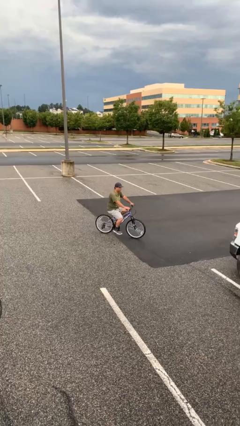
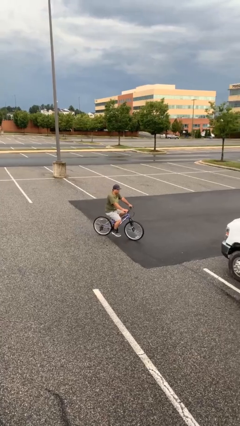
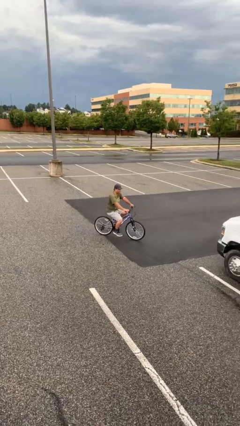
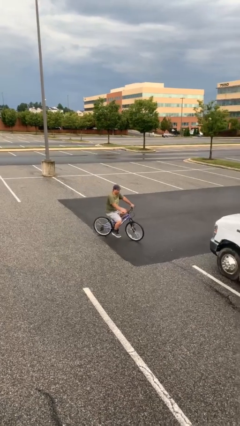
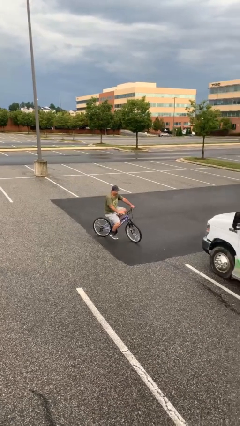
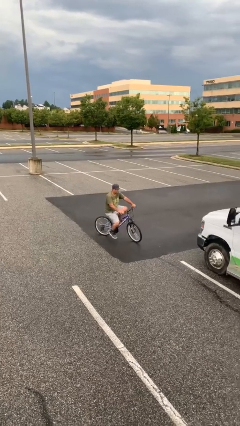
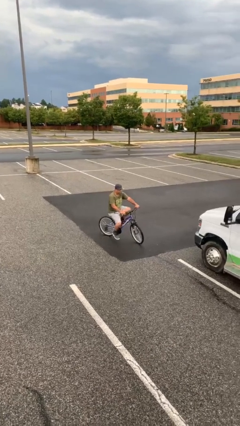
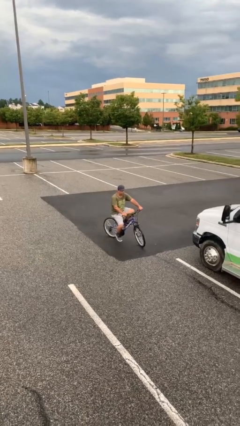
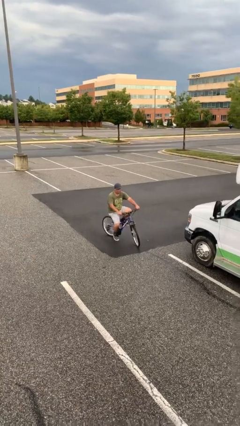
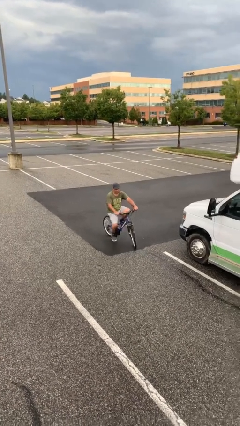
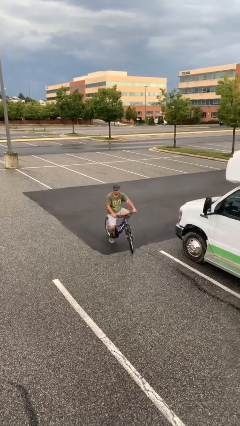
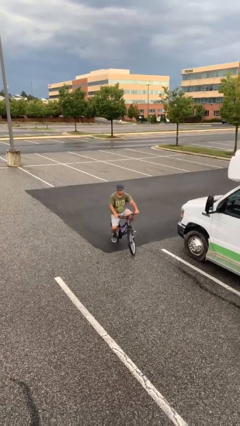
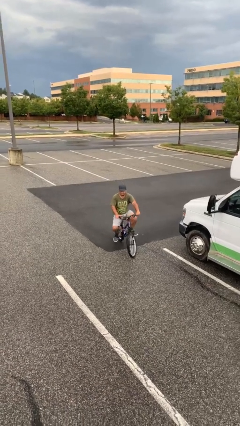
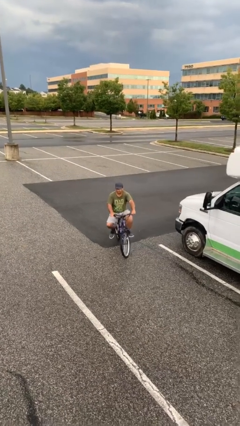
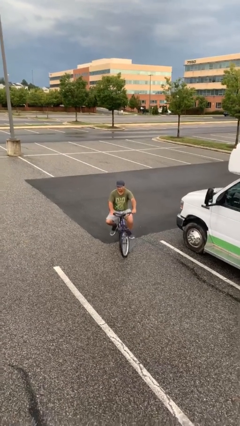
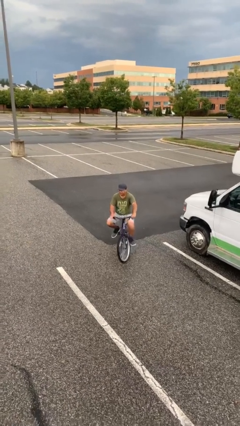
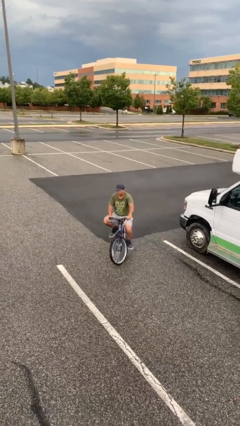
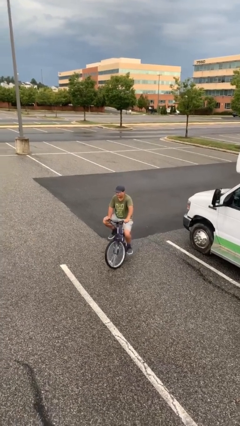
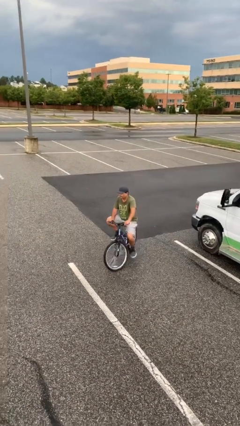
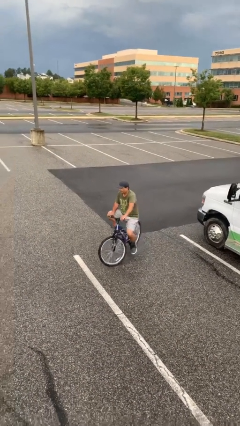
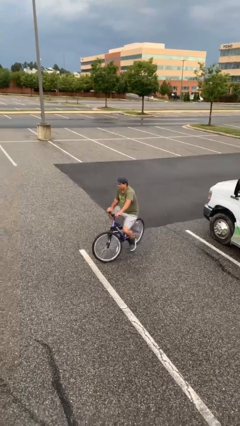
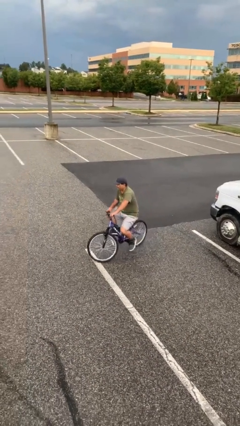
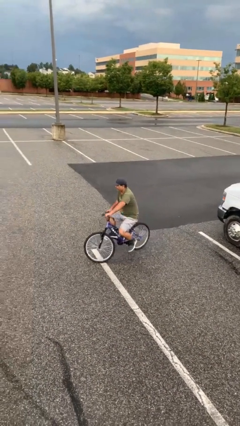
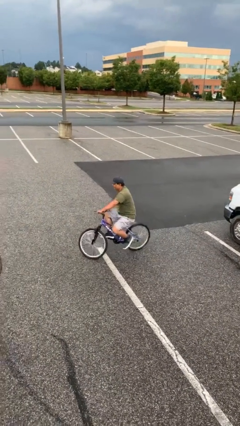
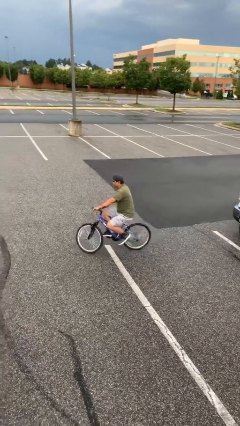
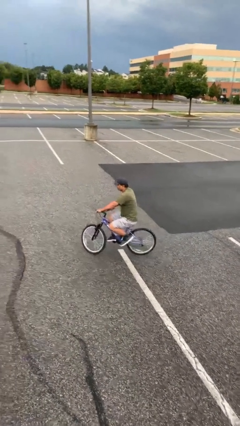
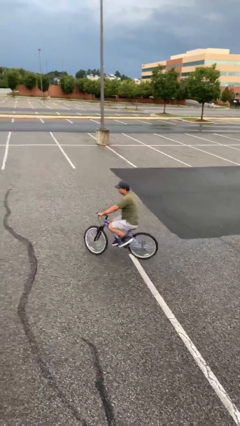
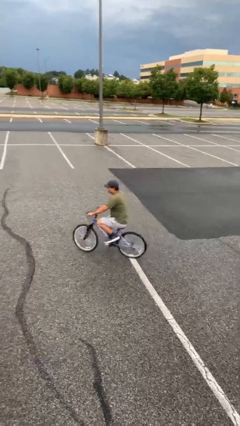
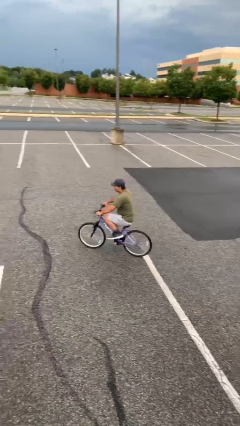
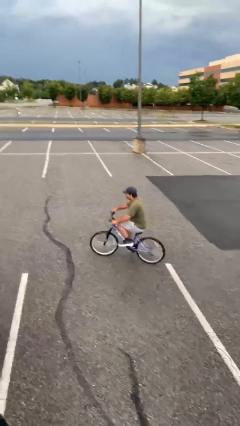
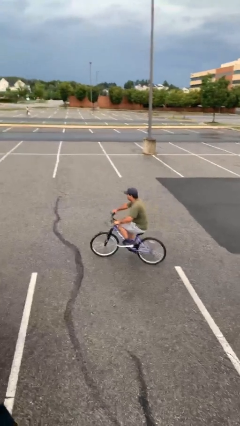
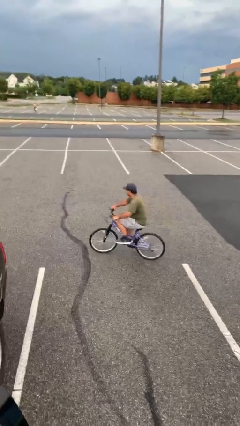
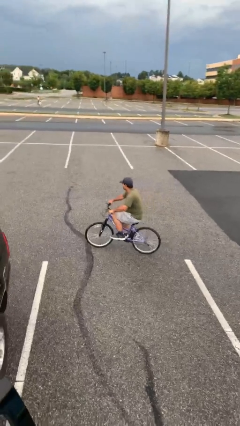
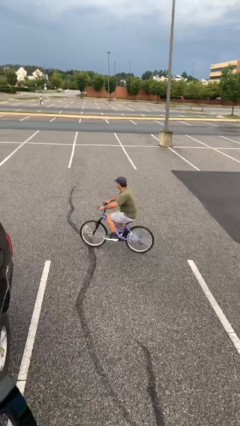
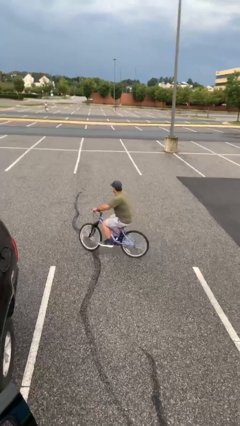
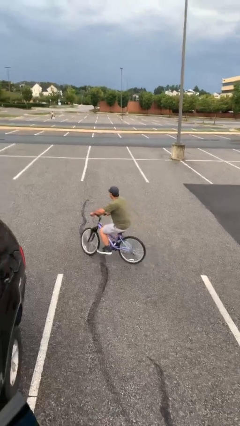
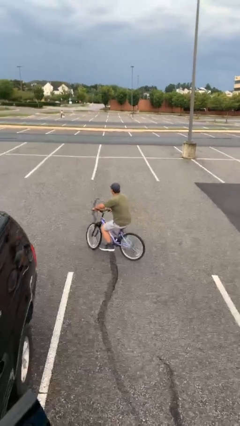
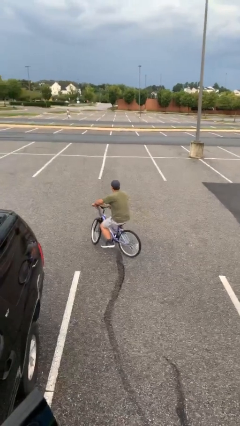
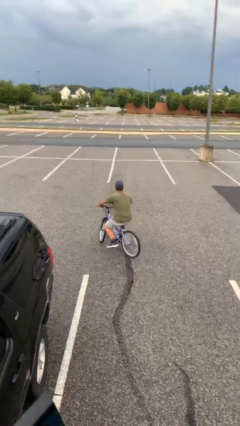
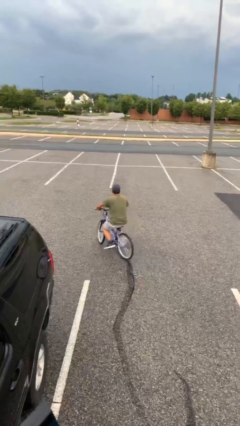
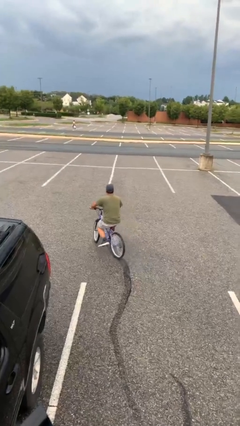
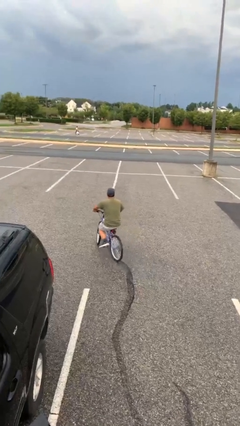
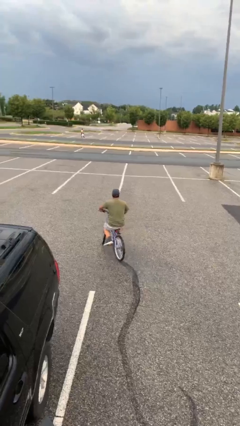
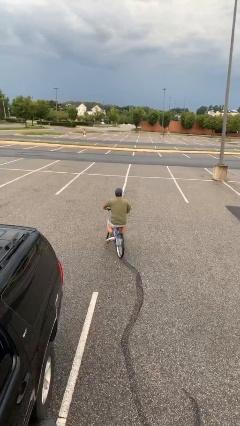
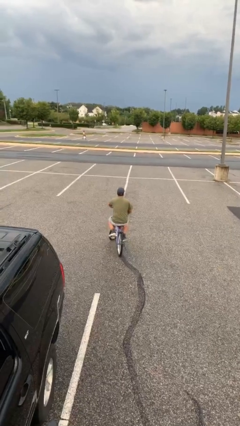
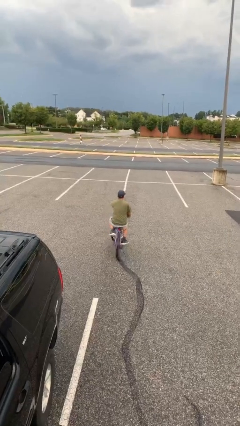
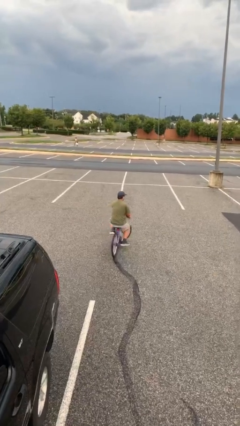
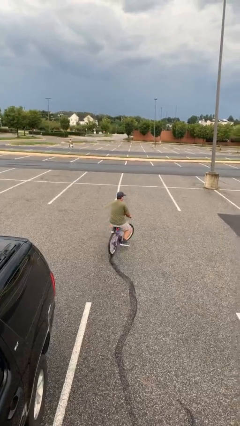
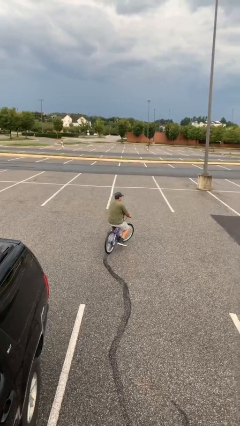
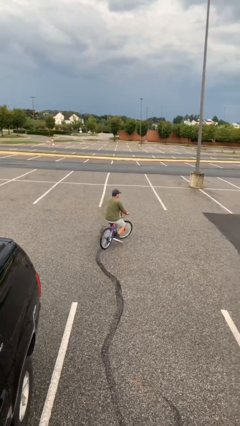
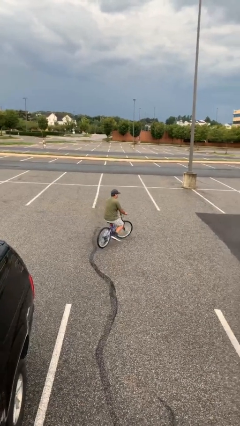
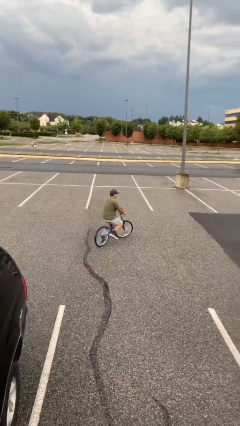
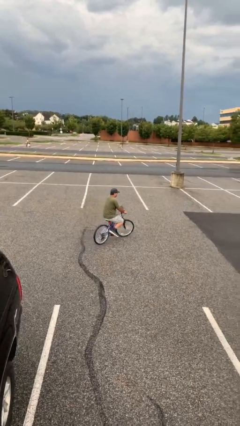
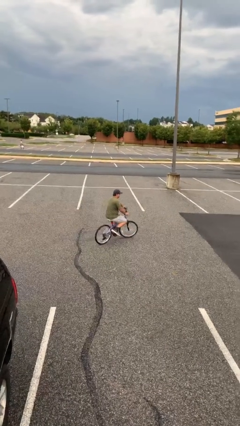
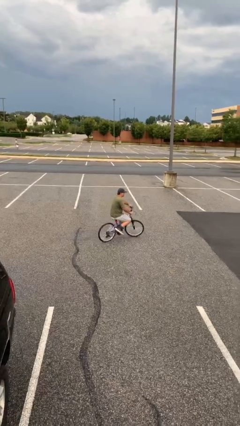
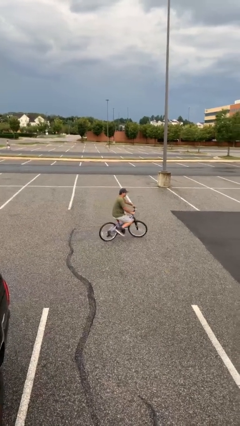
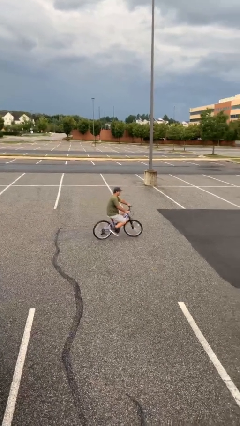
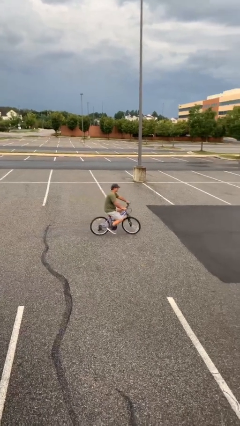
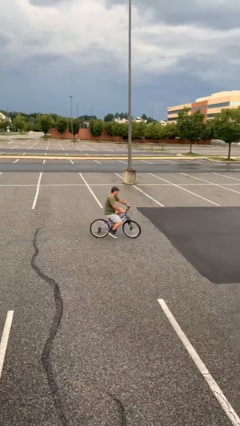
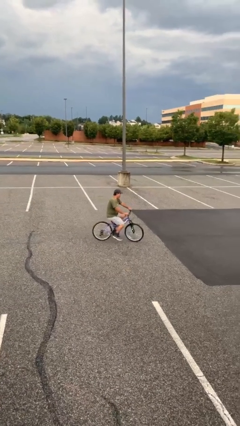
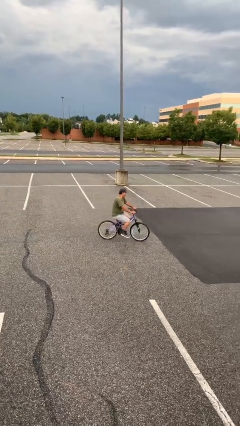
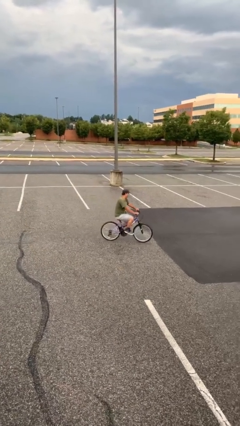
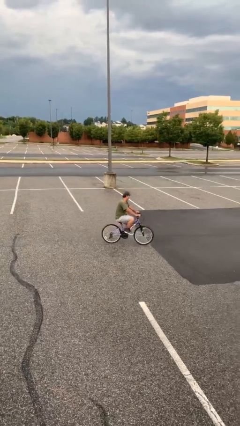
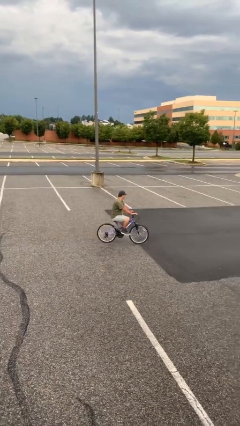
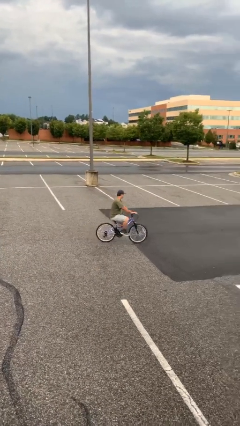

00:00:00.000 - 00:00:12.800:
person rides bicycle

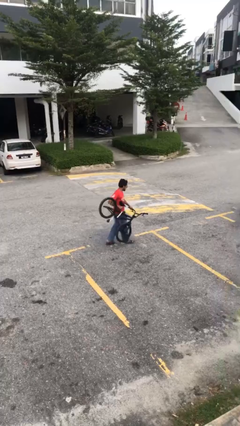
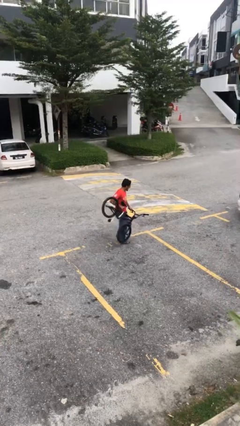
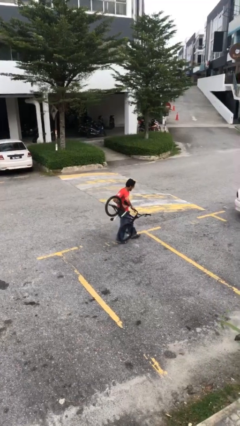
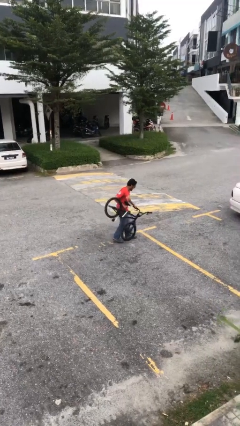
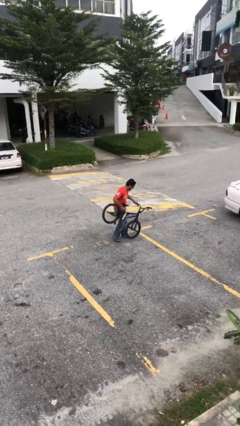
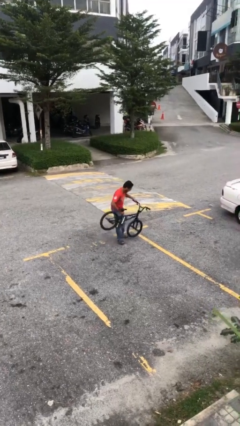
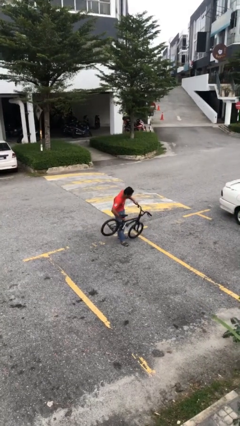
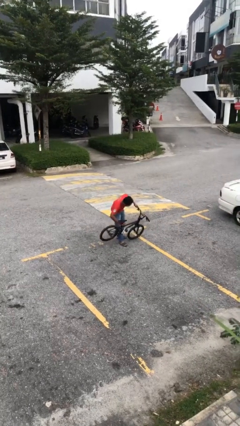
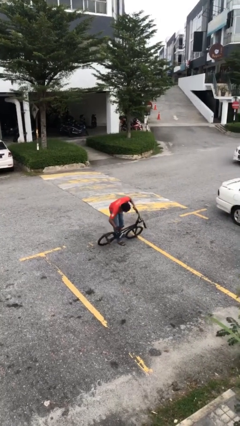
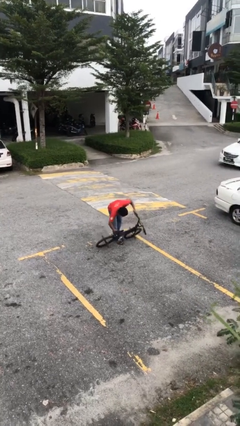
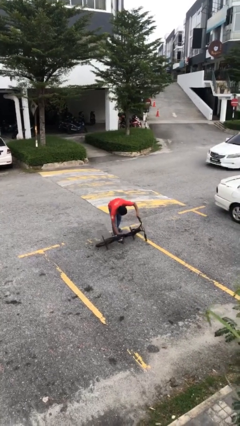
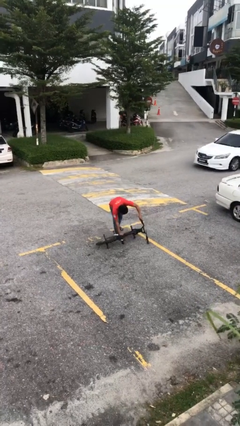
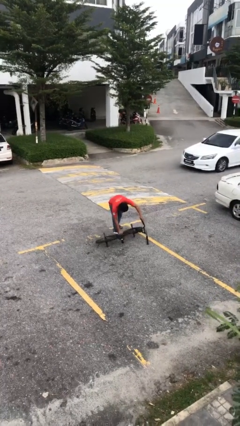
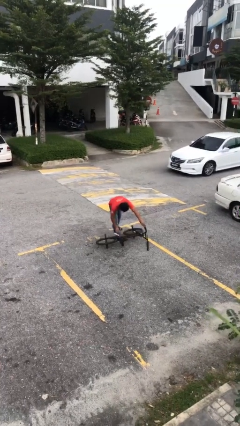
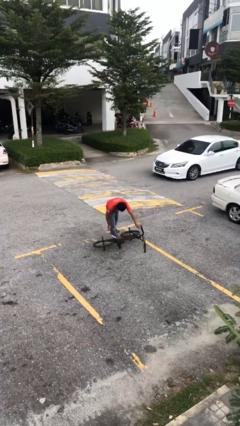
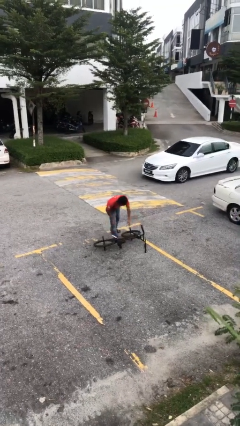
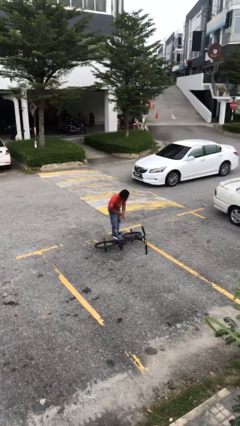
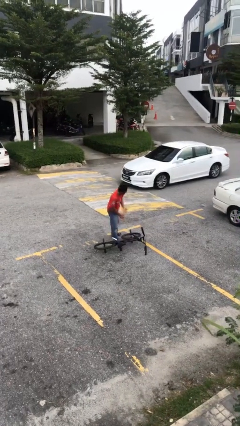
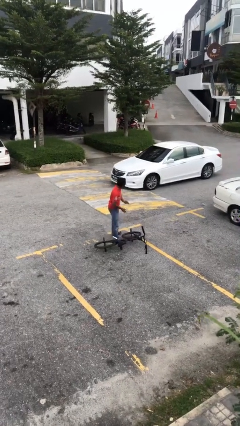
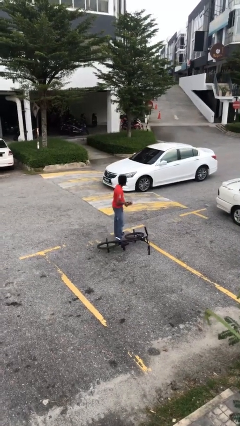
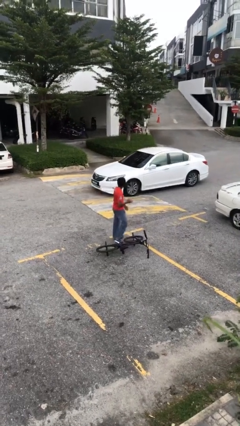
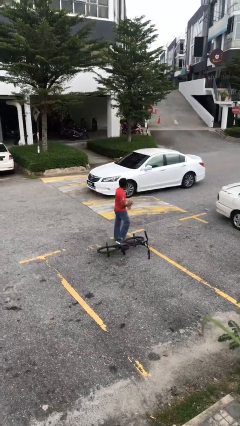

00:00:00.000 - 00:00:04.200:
person puts down object on floor

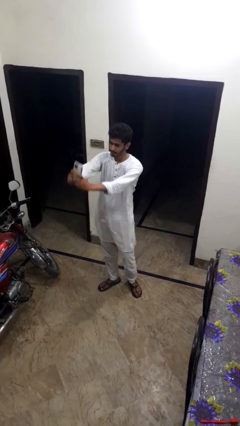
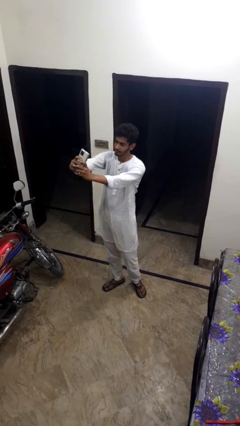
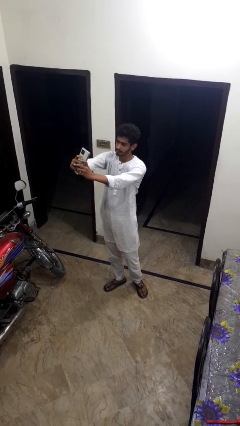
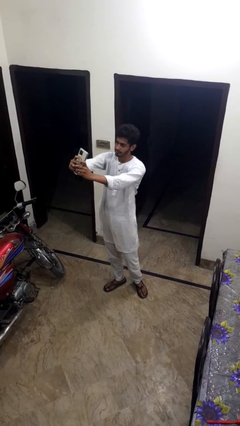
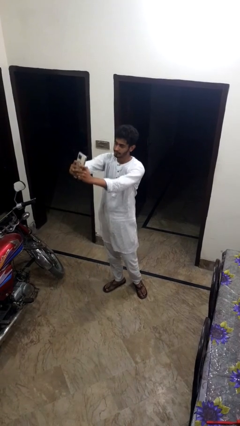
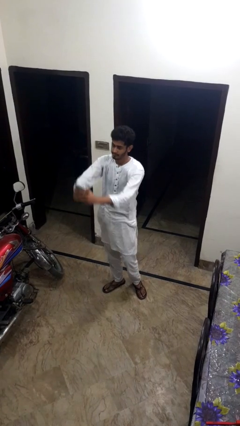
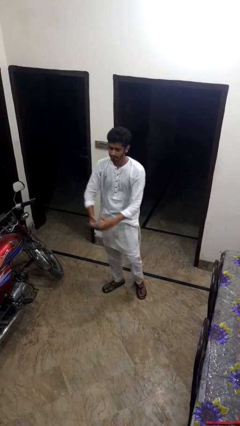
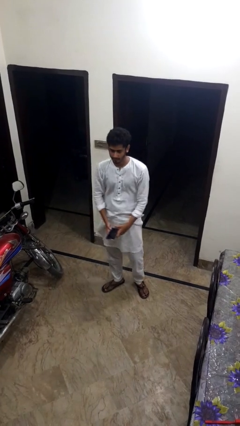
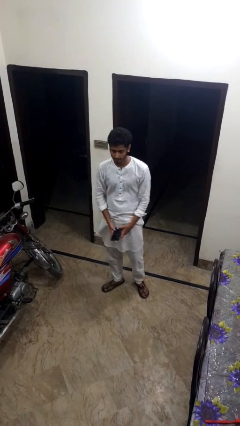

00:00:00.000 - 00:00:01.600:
person takes selfie
